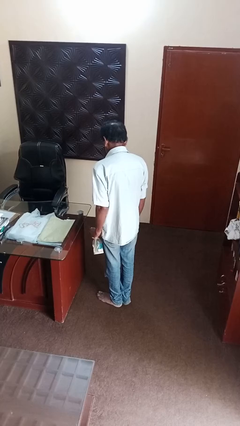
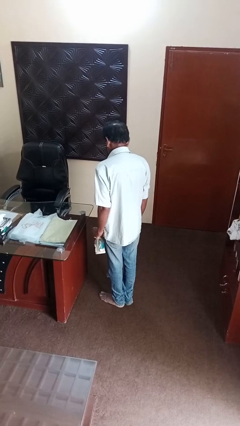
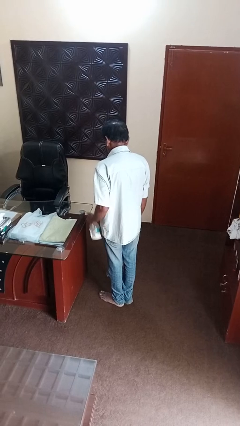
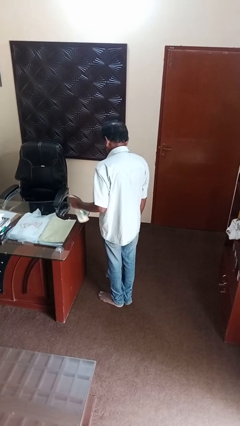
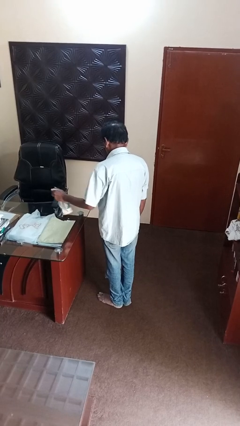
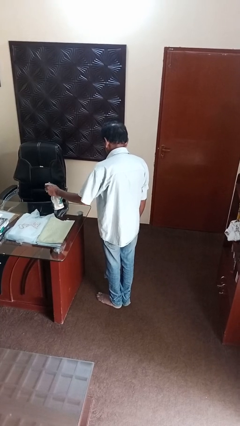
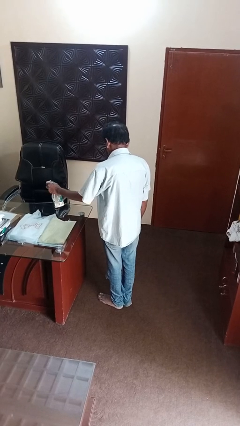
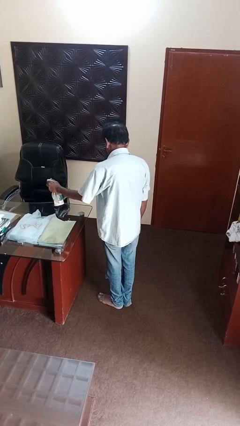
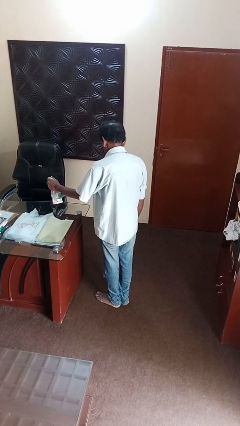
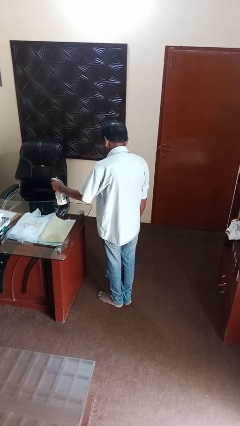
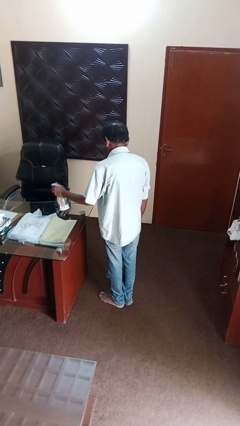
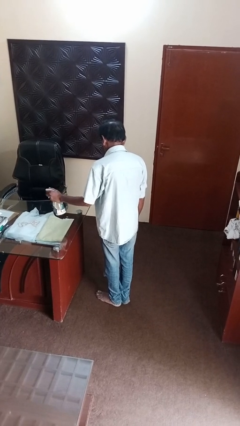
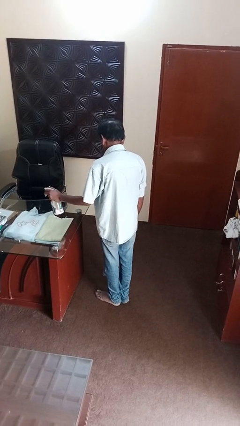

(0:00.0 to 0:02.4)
person sprays from bottle

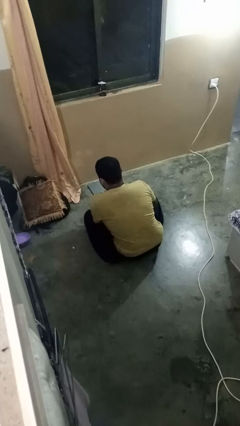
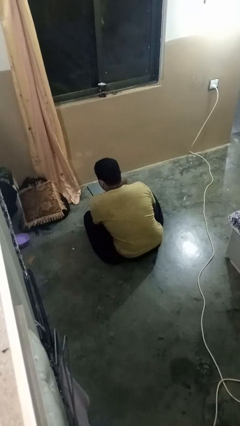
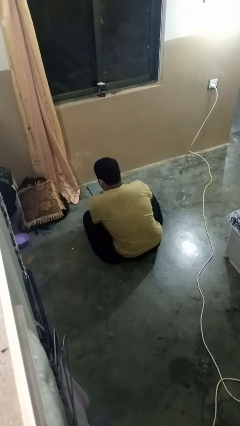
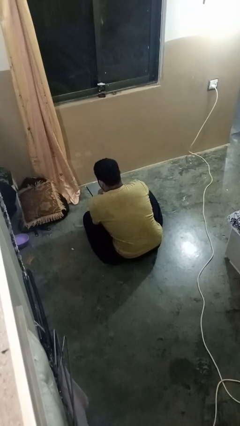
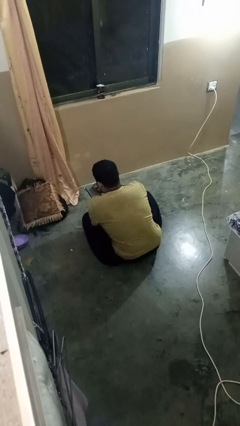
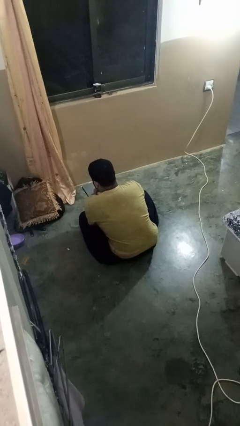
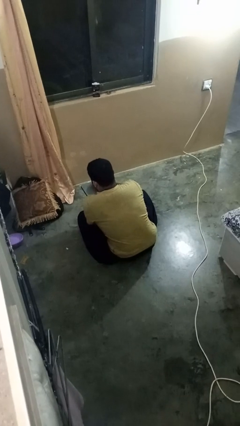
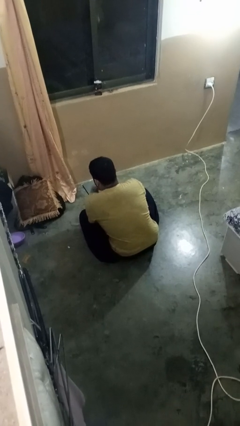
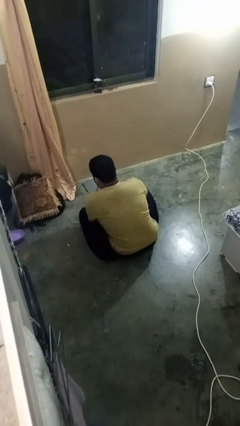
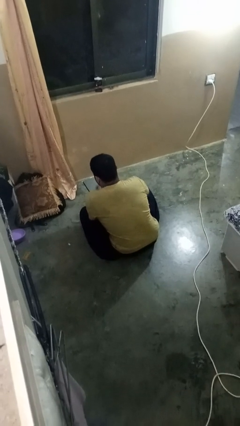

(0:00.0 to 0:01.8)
person interacts with tablet

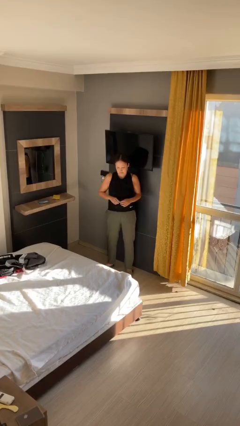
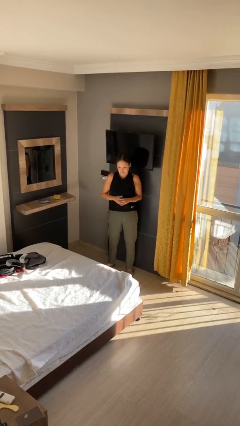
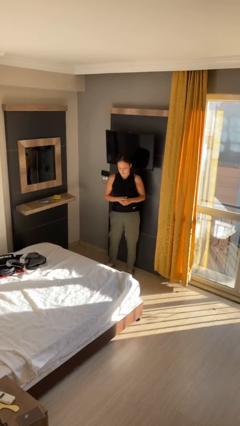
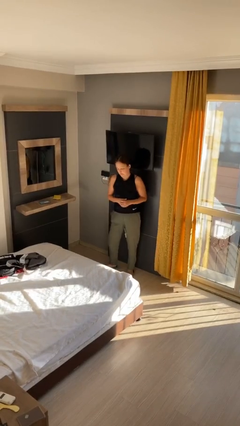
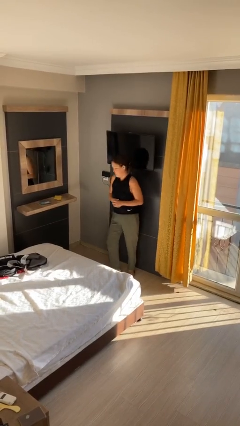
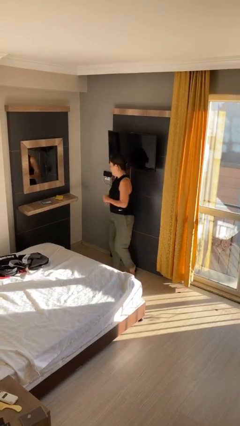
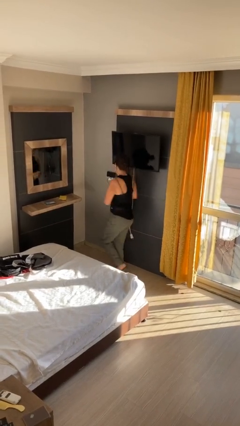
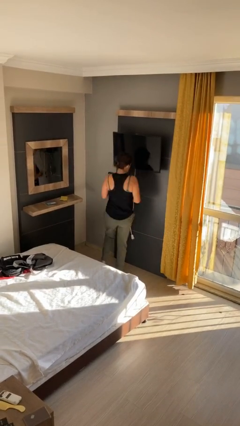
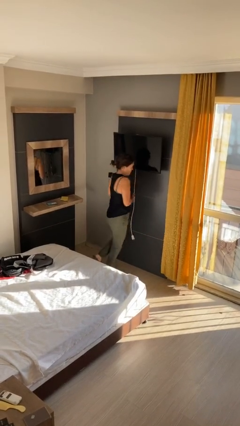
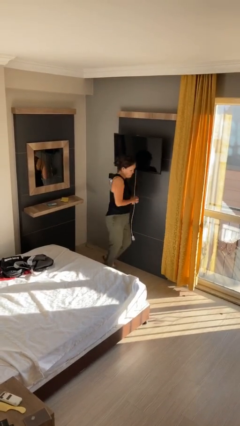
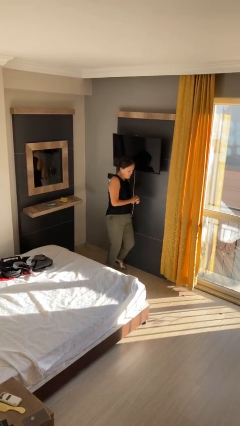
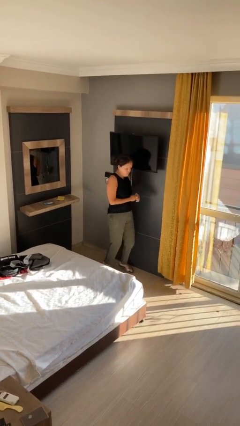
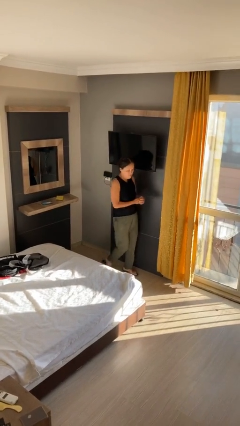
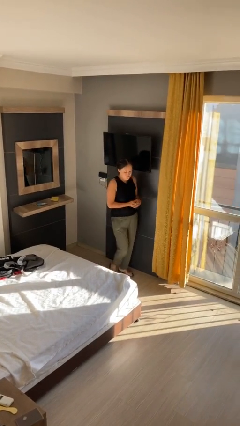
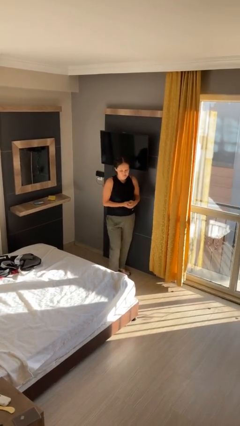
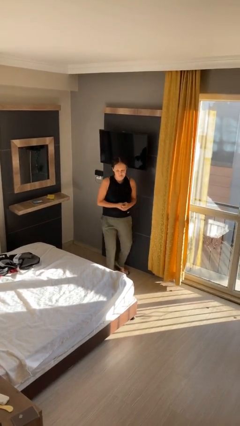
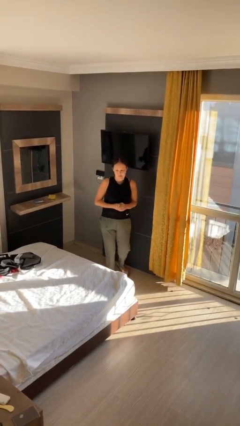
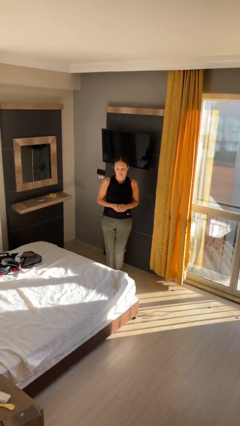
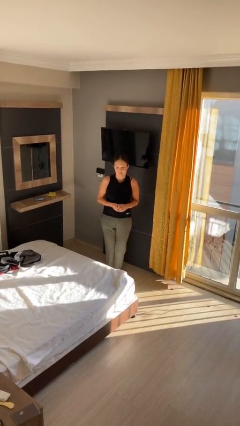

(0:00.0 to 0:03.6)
person twirls

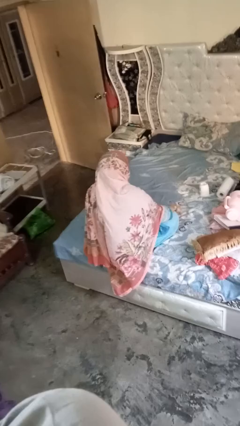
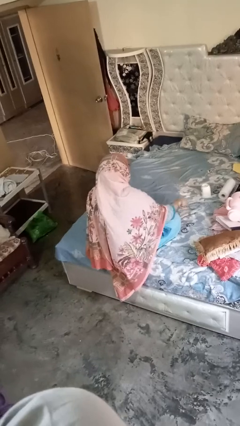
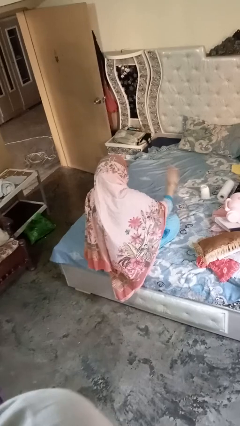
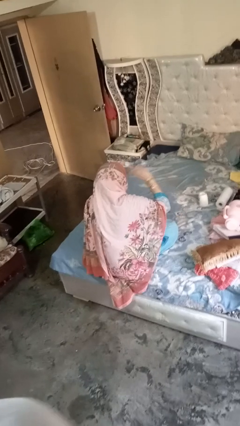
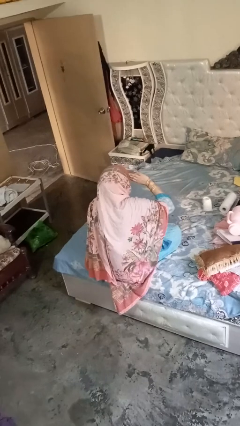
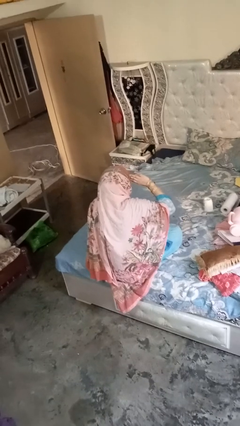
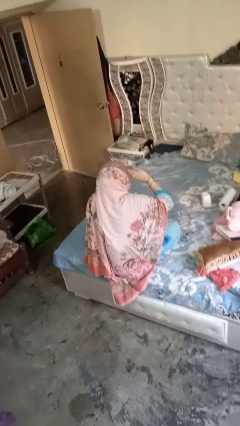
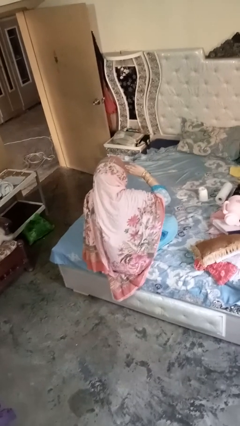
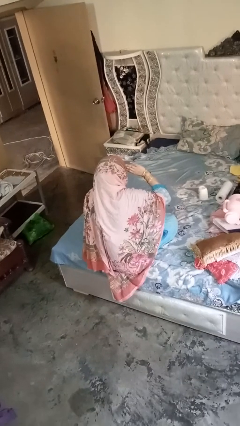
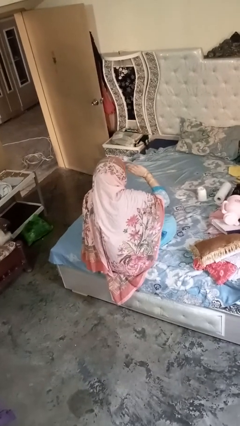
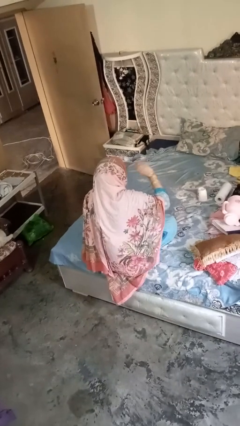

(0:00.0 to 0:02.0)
person salutes

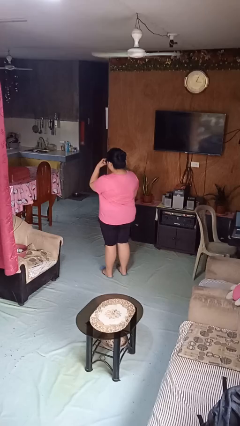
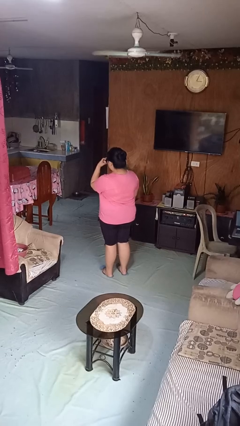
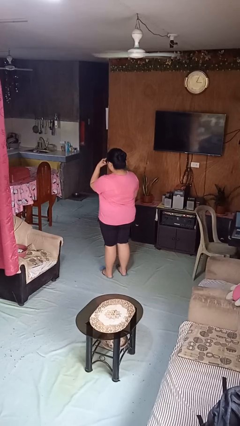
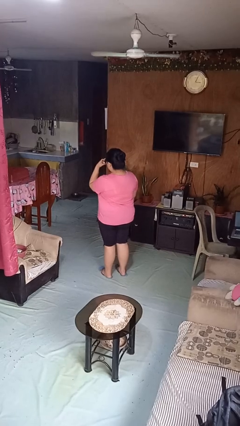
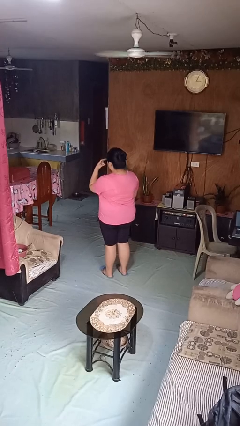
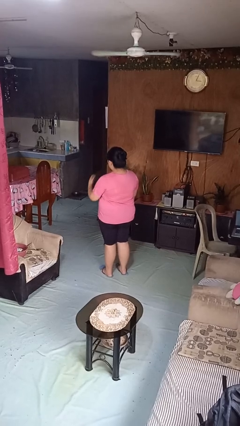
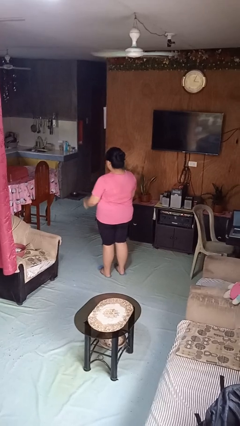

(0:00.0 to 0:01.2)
person gestures watch closely

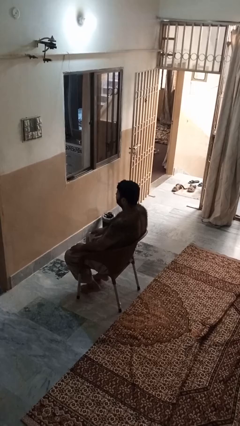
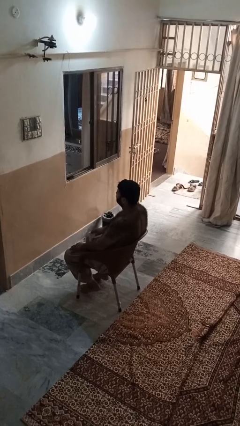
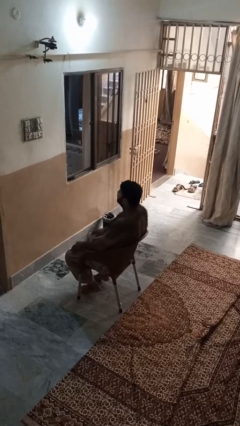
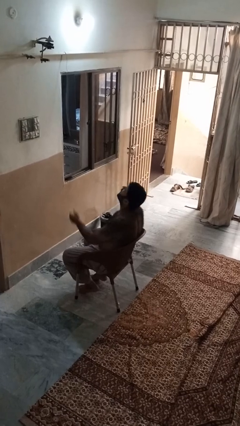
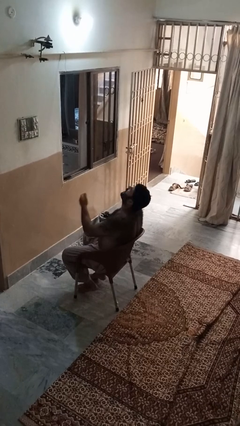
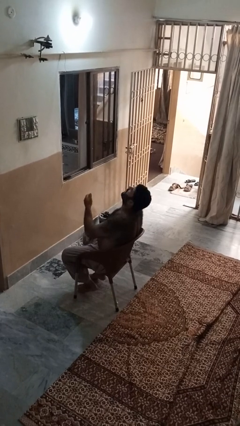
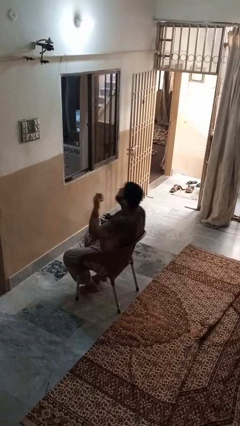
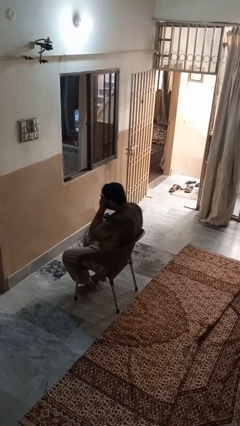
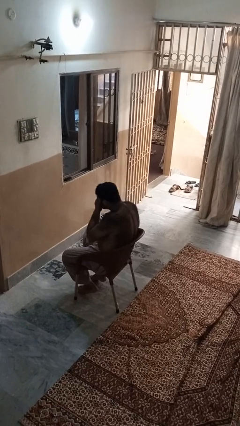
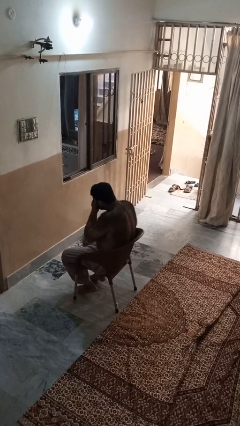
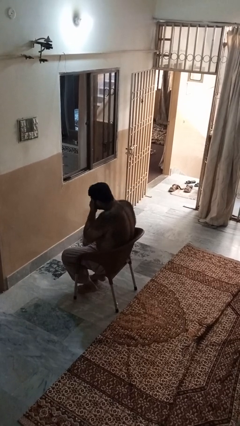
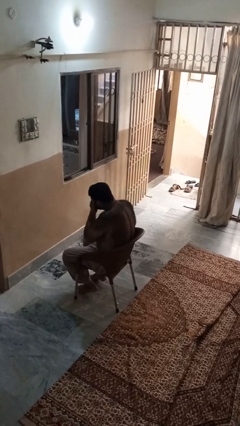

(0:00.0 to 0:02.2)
person sneezes into hand

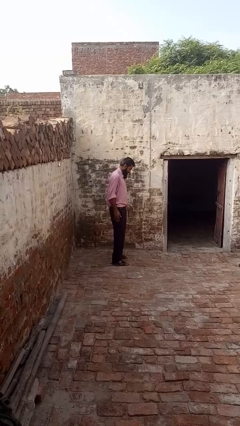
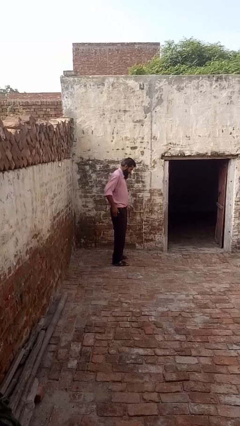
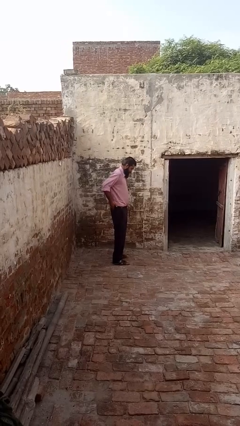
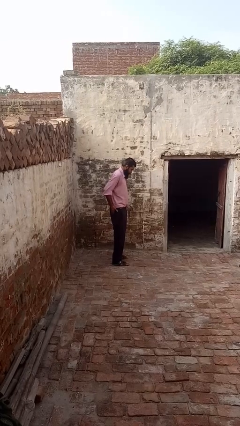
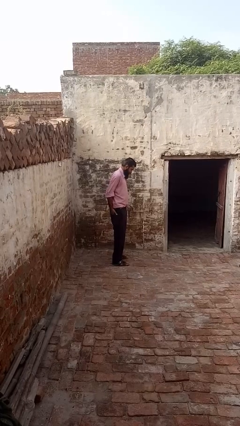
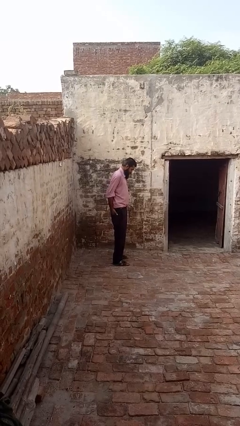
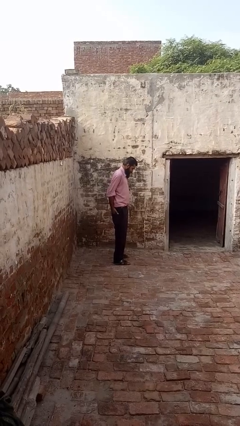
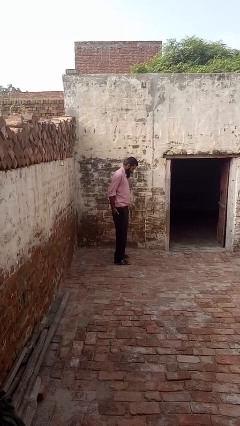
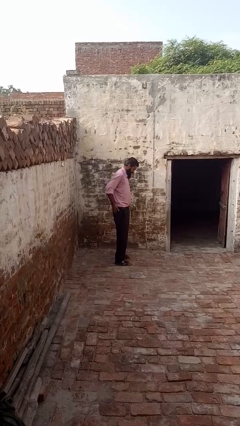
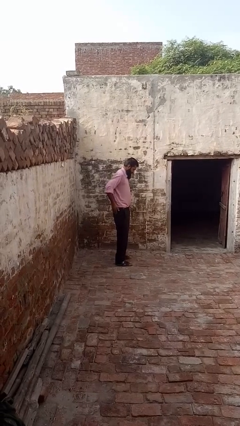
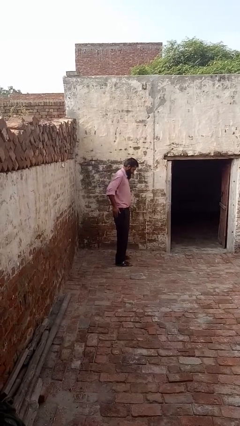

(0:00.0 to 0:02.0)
person puts hands in back pockets

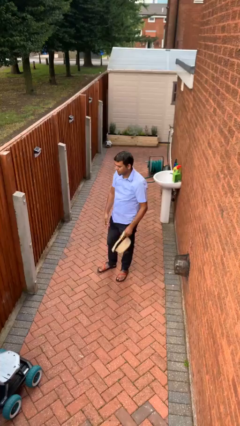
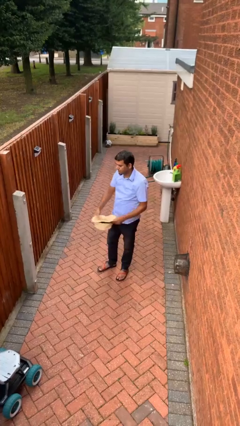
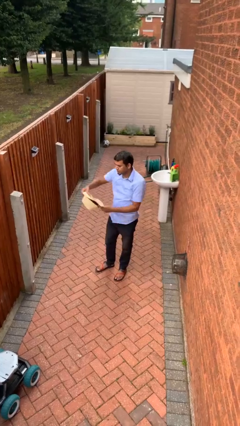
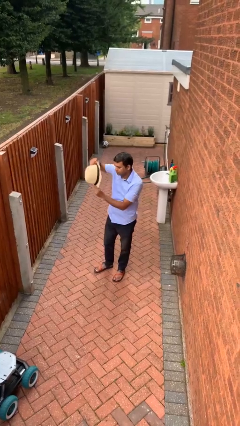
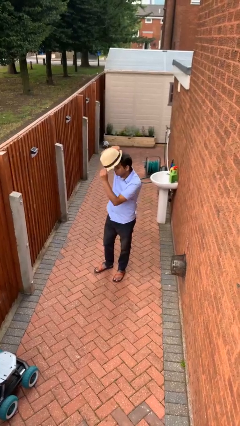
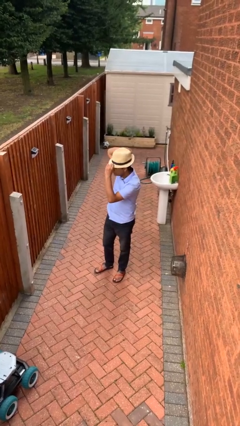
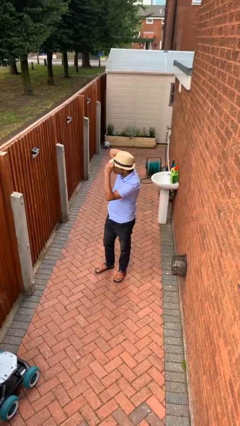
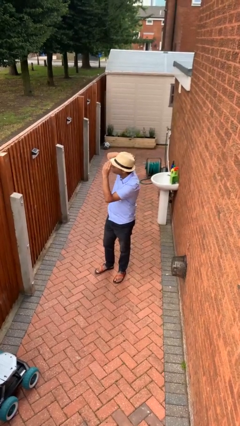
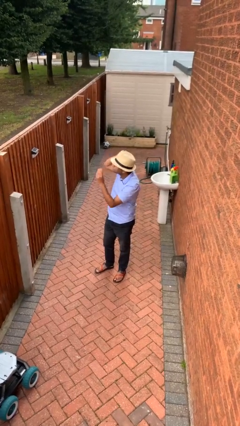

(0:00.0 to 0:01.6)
person puts on hat
